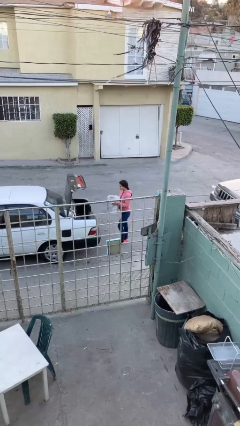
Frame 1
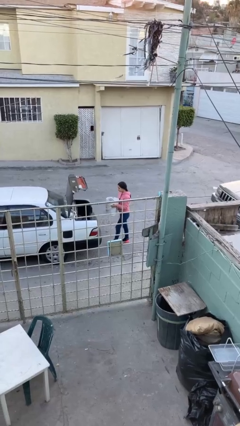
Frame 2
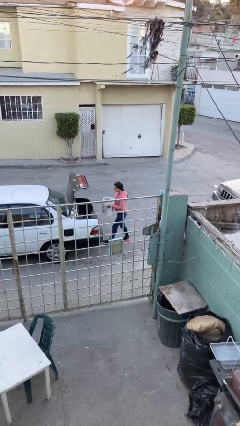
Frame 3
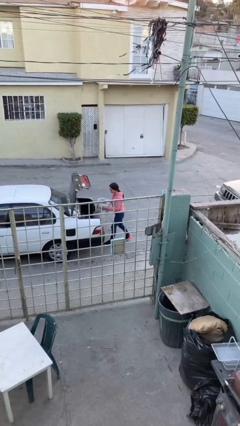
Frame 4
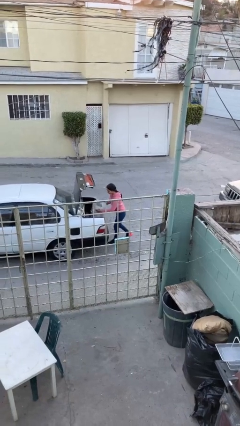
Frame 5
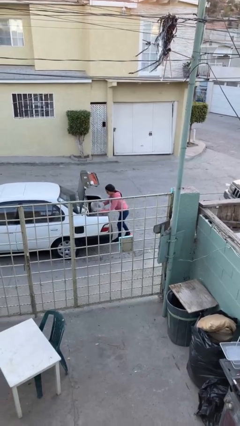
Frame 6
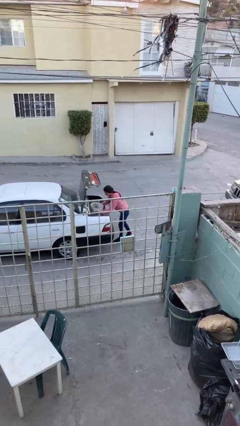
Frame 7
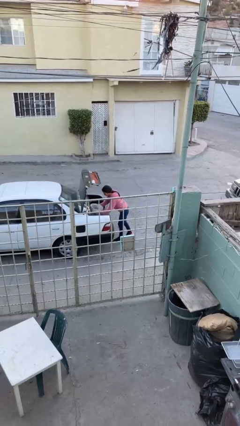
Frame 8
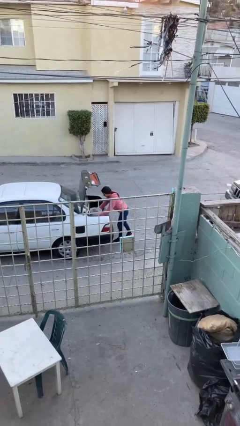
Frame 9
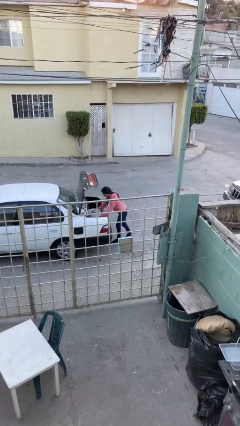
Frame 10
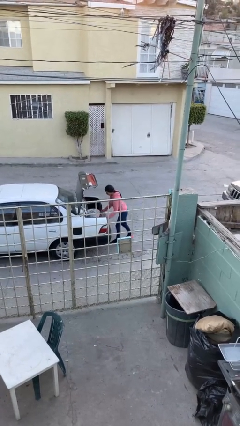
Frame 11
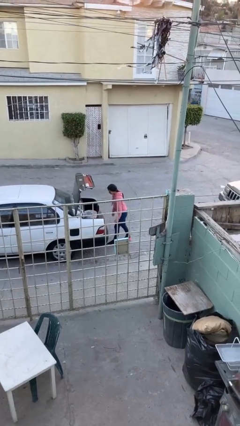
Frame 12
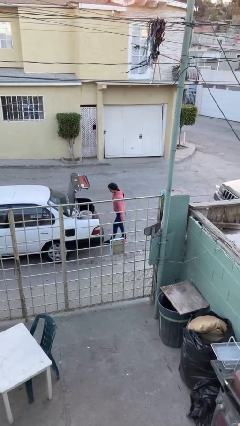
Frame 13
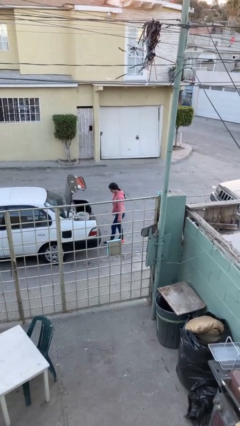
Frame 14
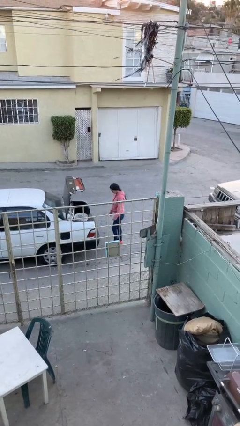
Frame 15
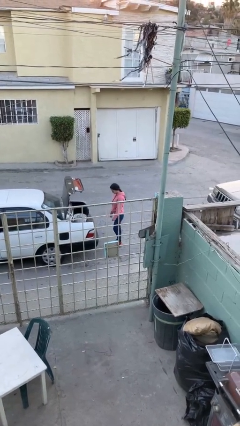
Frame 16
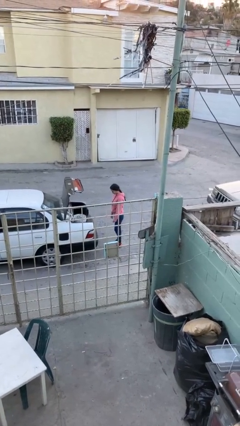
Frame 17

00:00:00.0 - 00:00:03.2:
person loads car

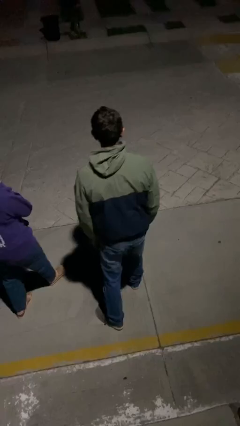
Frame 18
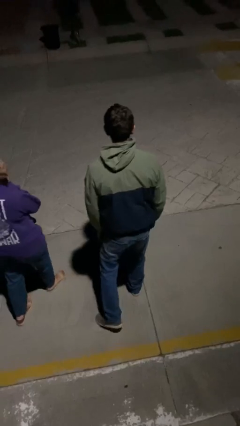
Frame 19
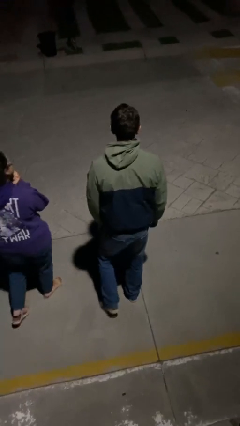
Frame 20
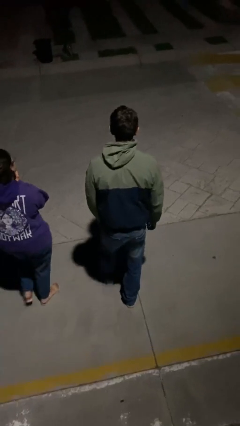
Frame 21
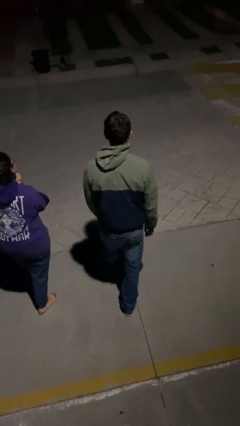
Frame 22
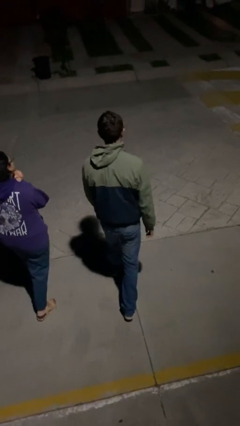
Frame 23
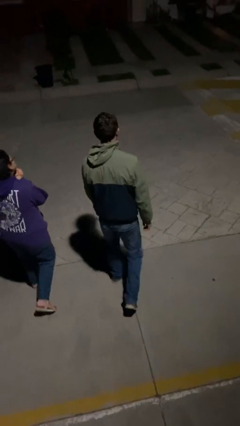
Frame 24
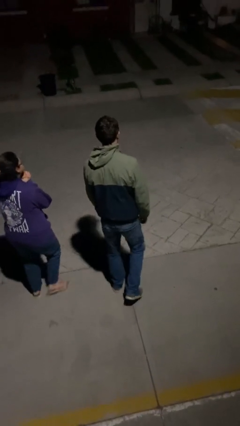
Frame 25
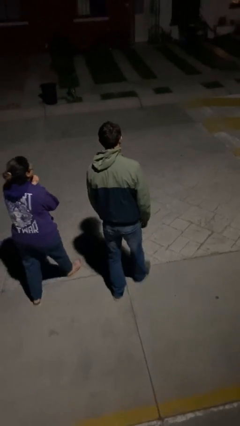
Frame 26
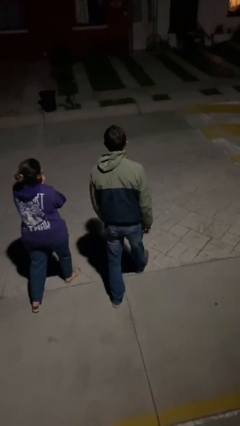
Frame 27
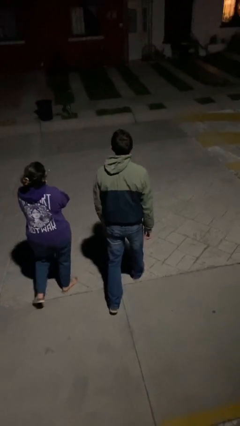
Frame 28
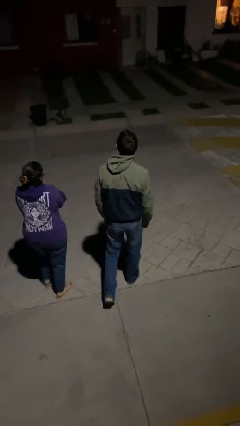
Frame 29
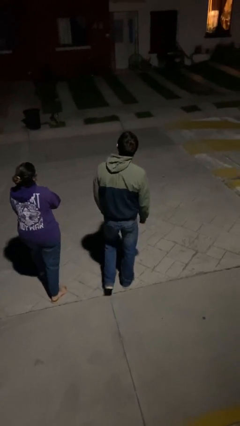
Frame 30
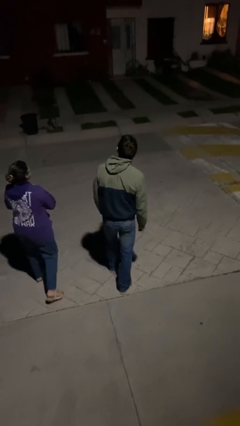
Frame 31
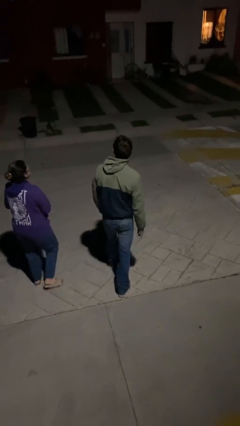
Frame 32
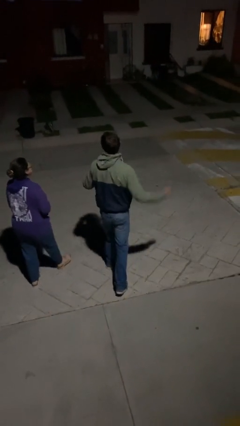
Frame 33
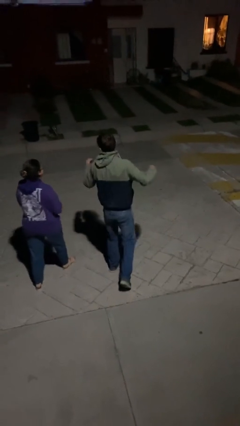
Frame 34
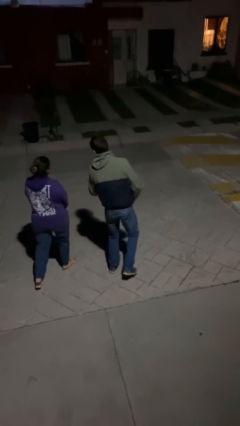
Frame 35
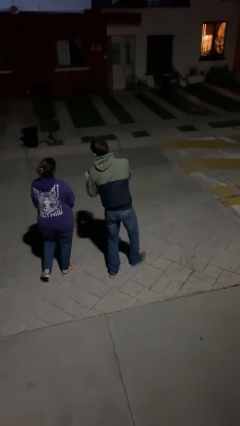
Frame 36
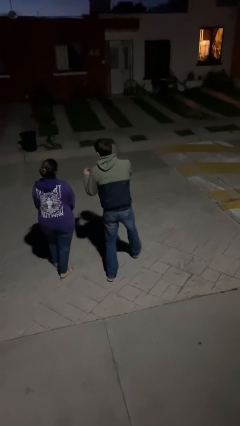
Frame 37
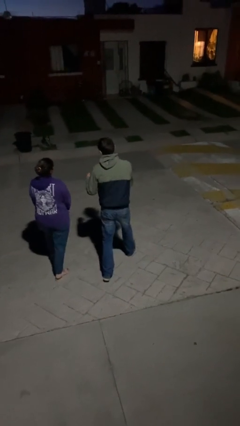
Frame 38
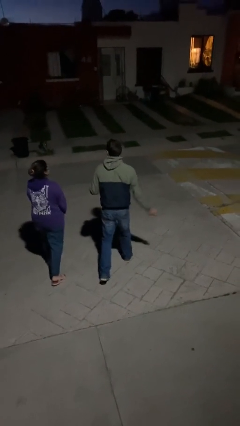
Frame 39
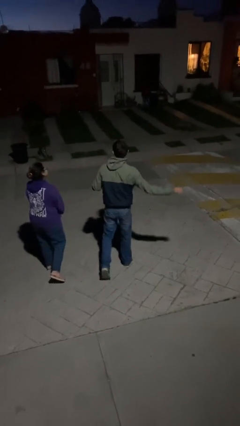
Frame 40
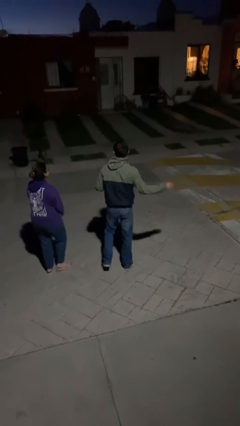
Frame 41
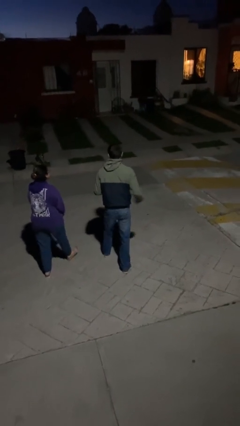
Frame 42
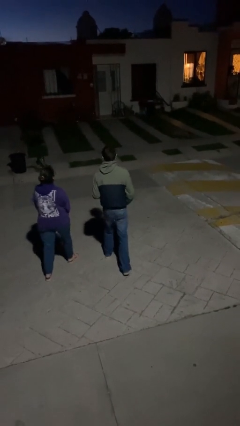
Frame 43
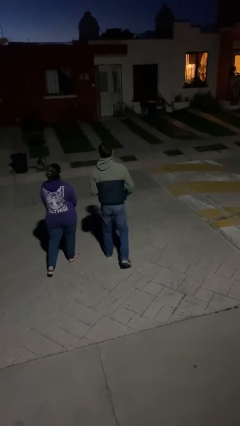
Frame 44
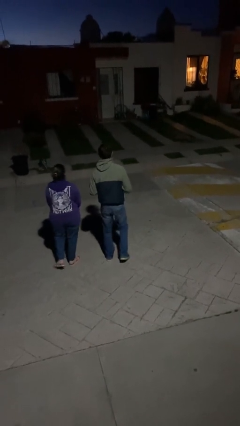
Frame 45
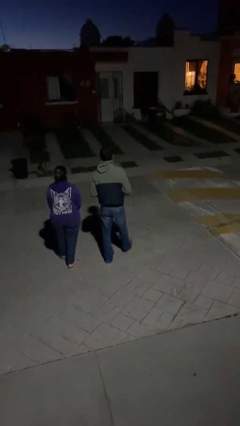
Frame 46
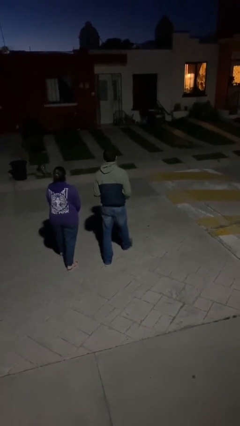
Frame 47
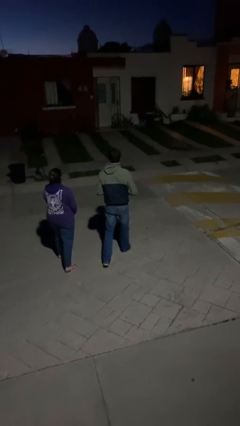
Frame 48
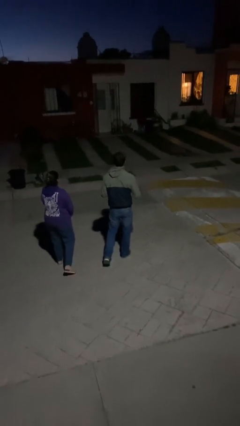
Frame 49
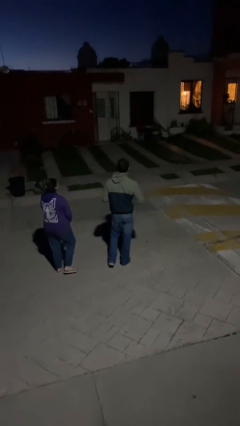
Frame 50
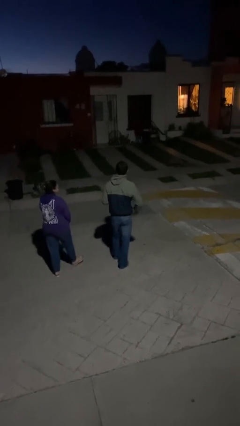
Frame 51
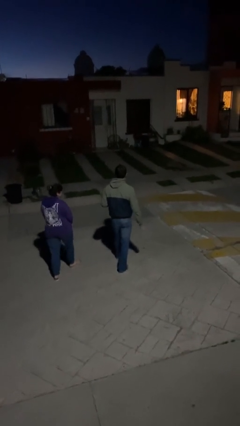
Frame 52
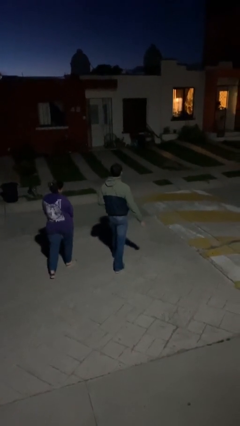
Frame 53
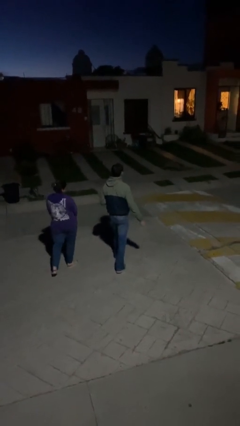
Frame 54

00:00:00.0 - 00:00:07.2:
person talks to person

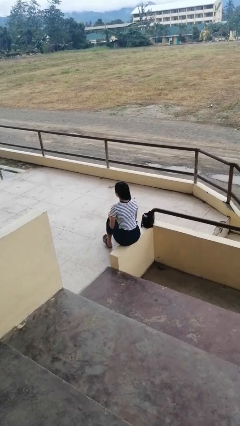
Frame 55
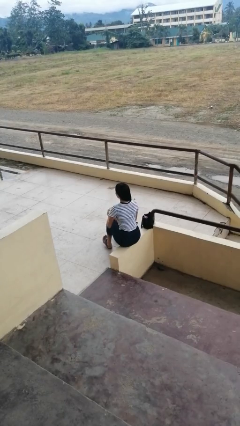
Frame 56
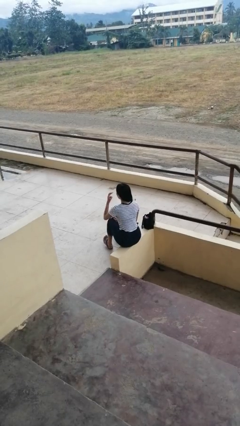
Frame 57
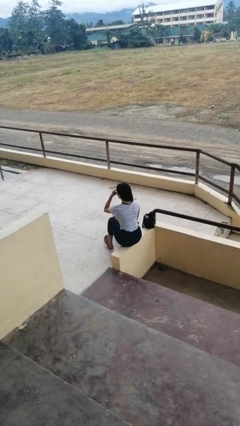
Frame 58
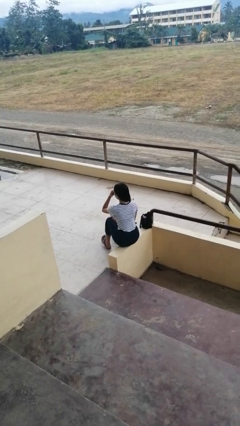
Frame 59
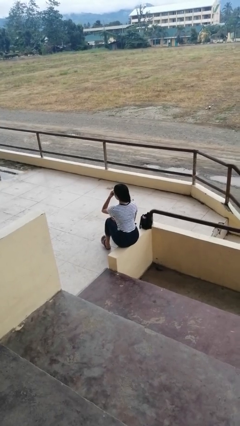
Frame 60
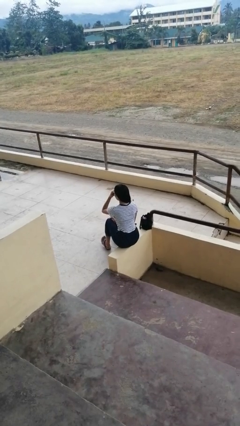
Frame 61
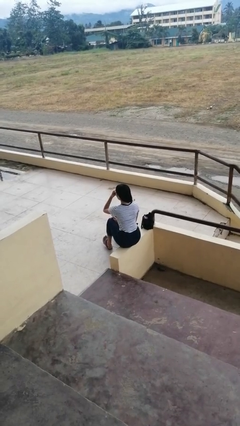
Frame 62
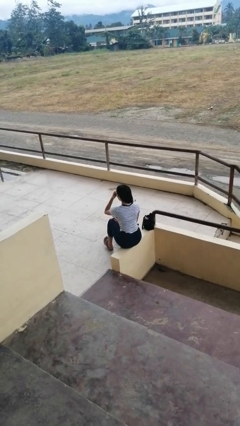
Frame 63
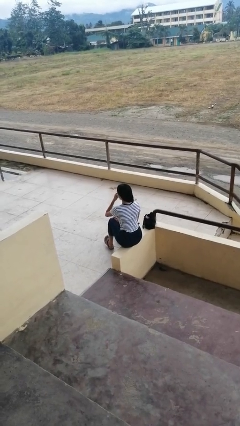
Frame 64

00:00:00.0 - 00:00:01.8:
person gestures watch closely

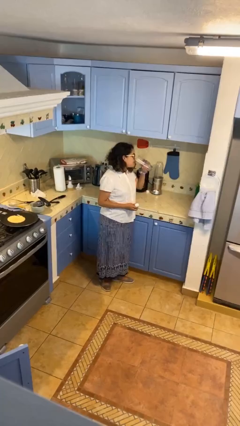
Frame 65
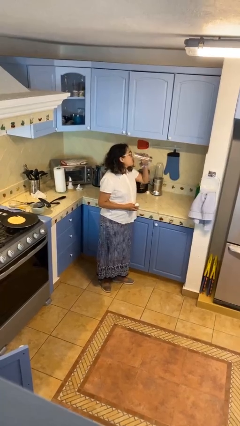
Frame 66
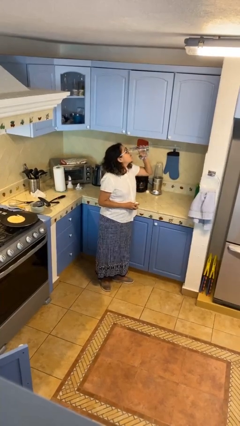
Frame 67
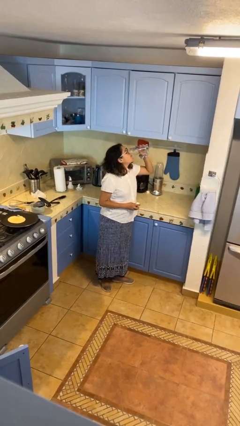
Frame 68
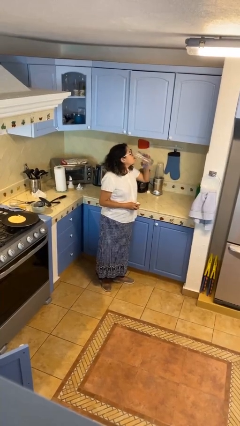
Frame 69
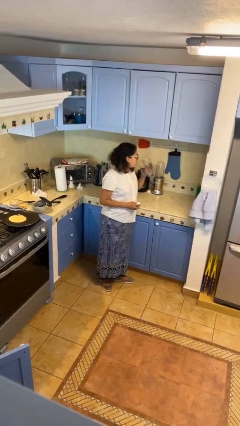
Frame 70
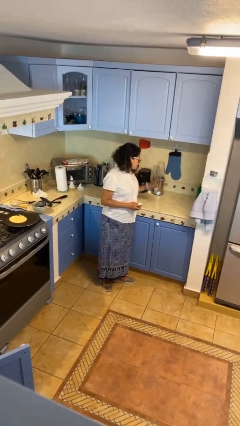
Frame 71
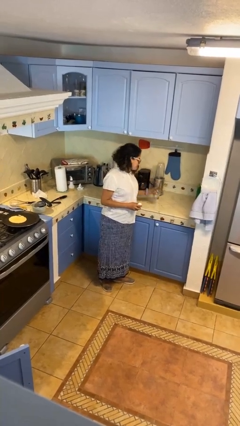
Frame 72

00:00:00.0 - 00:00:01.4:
person drinks from cup

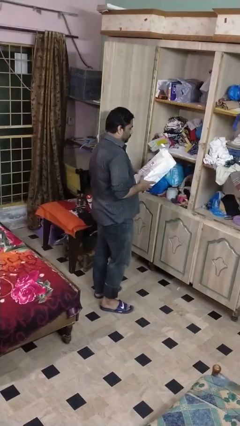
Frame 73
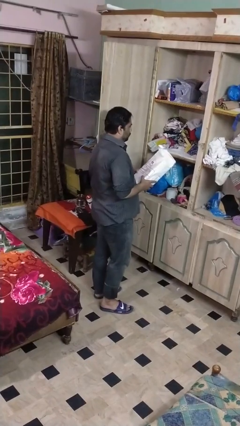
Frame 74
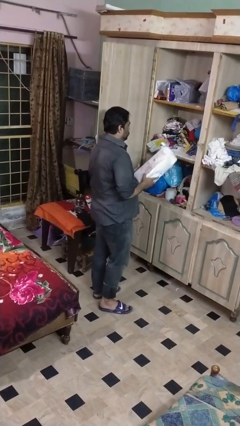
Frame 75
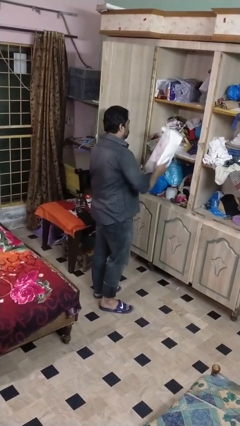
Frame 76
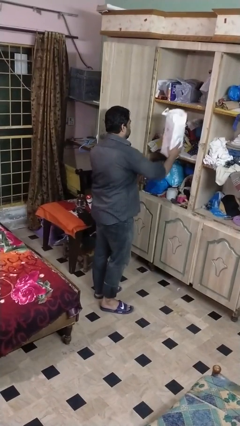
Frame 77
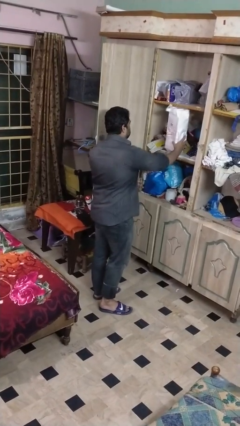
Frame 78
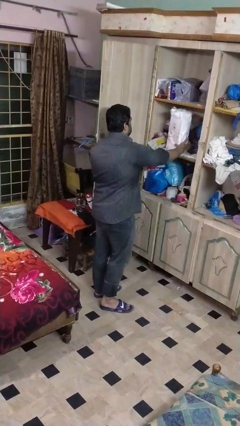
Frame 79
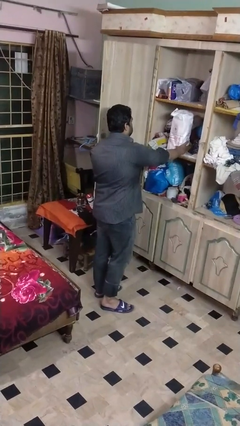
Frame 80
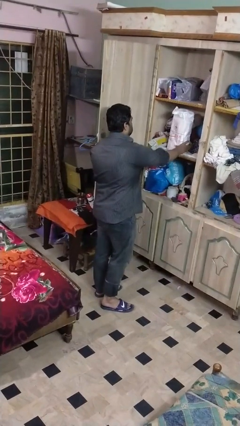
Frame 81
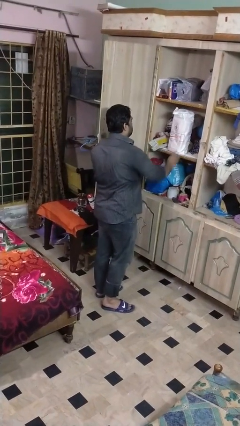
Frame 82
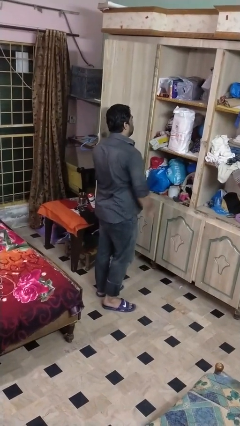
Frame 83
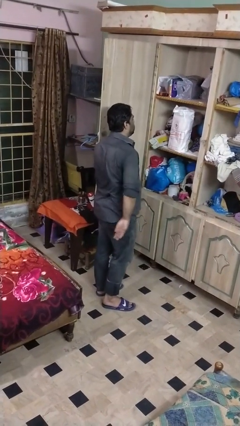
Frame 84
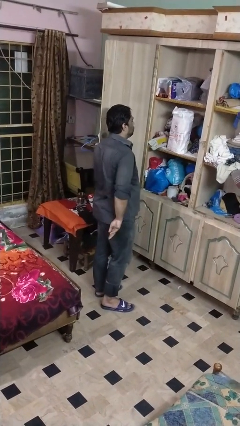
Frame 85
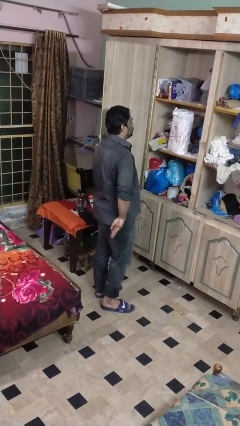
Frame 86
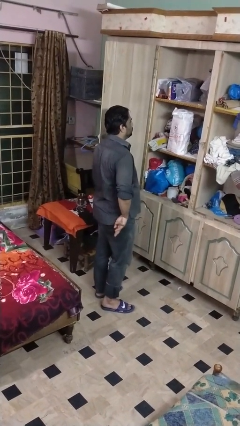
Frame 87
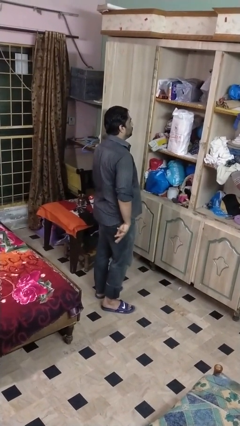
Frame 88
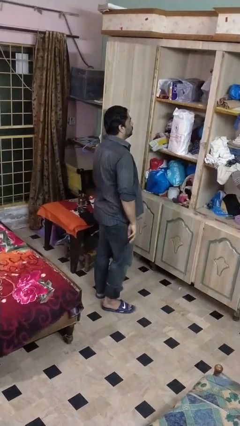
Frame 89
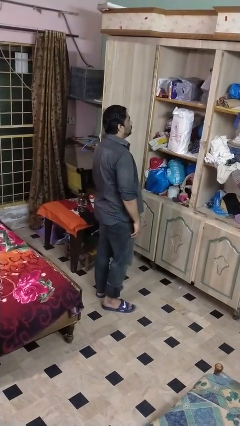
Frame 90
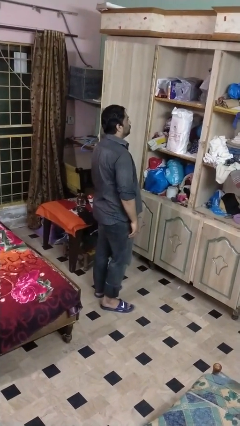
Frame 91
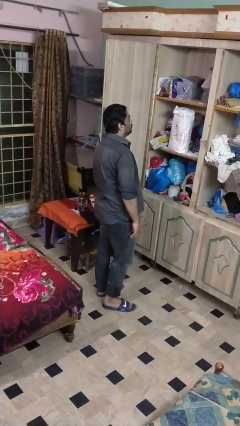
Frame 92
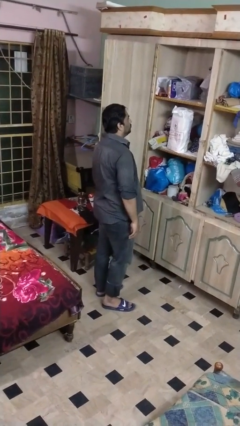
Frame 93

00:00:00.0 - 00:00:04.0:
person puts down object into cabinet
